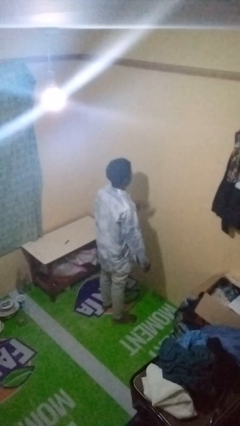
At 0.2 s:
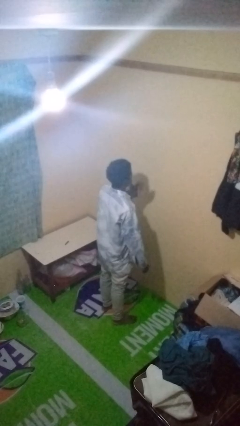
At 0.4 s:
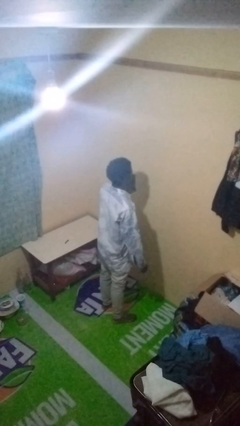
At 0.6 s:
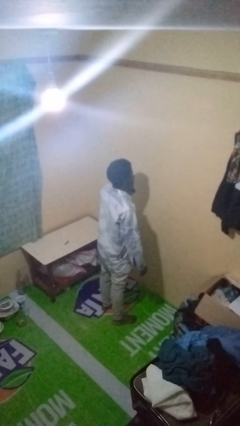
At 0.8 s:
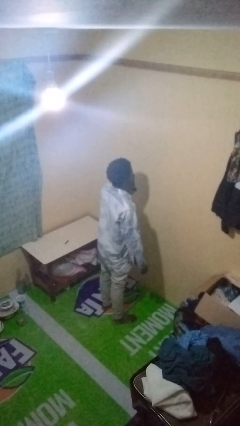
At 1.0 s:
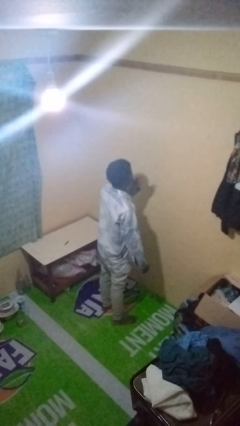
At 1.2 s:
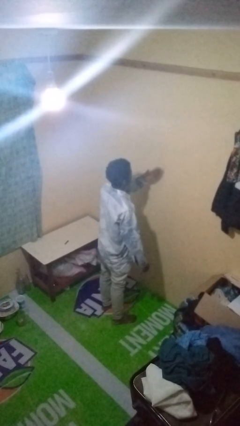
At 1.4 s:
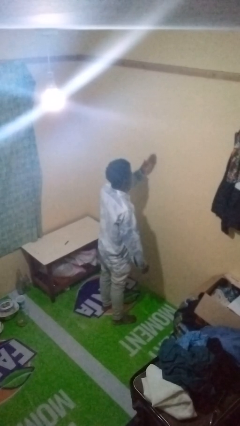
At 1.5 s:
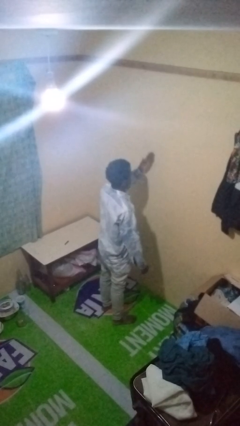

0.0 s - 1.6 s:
person gestures blow kiss

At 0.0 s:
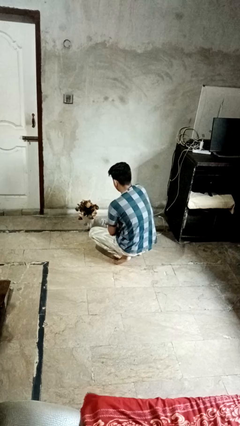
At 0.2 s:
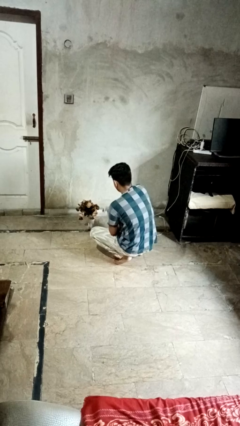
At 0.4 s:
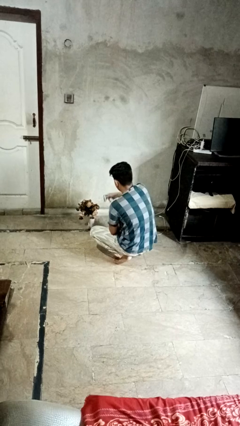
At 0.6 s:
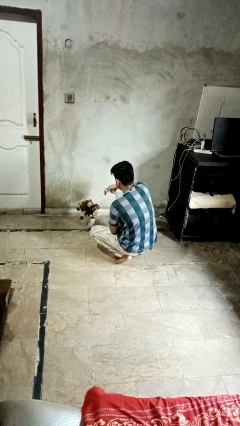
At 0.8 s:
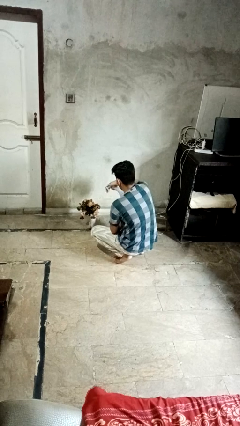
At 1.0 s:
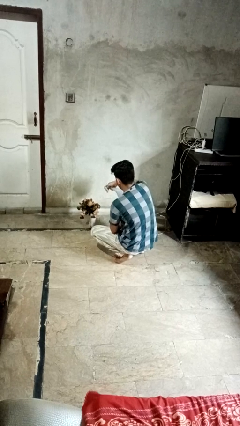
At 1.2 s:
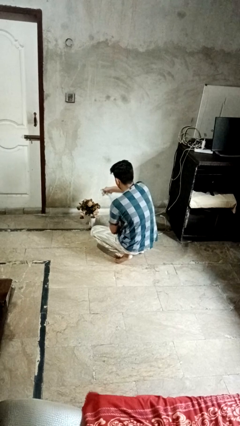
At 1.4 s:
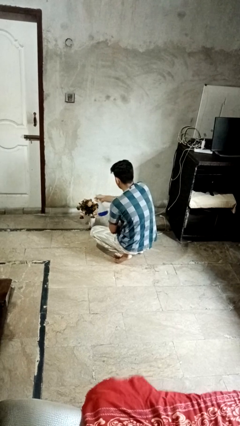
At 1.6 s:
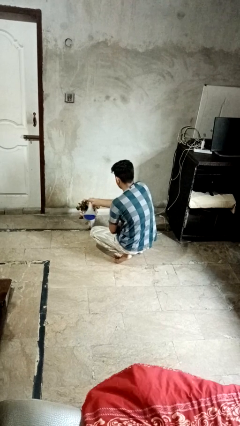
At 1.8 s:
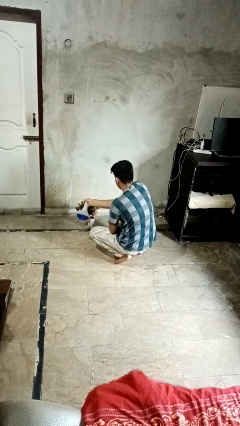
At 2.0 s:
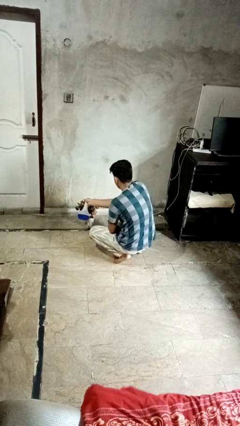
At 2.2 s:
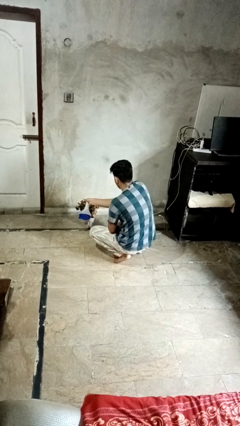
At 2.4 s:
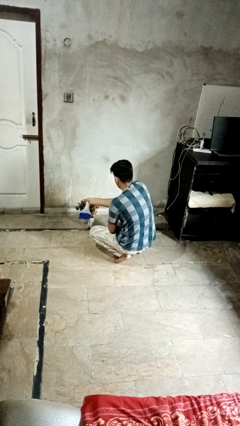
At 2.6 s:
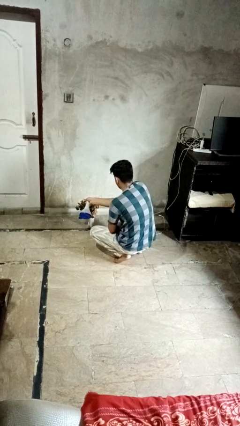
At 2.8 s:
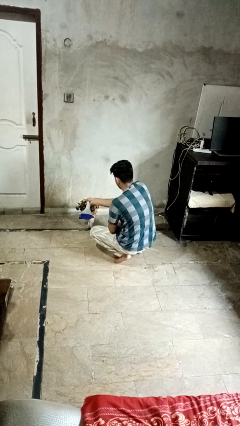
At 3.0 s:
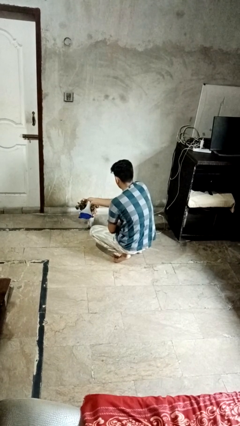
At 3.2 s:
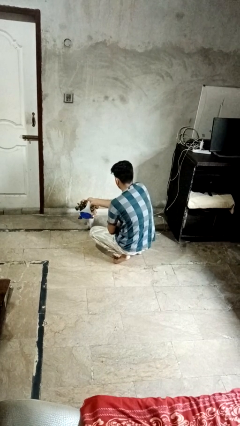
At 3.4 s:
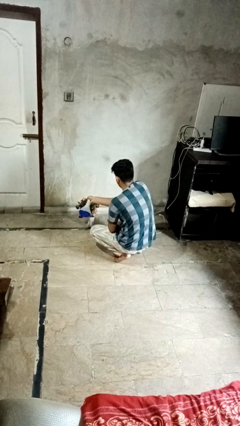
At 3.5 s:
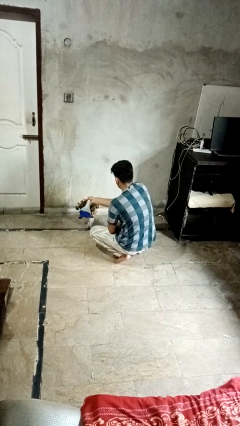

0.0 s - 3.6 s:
person waters houseplant

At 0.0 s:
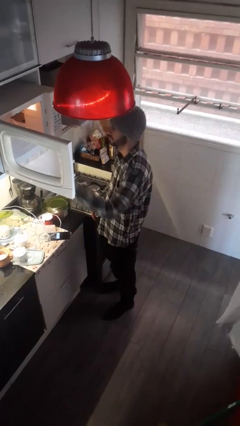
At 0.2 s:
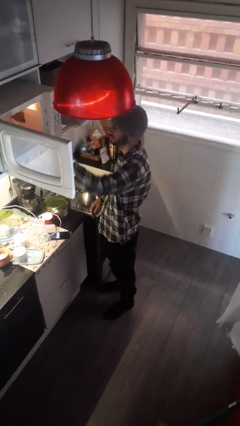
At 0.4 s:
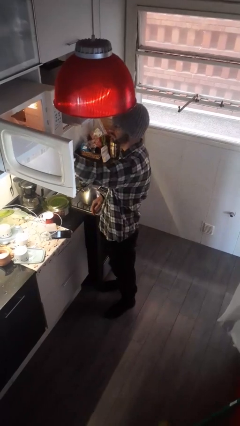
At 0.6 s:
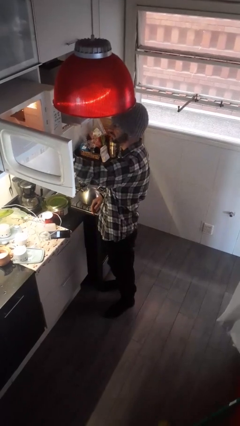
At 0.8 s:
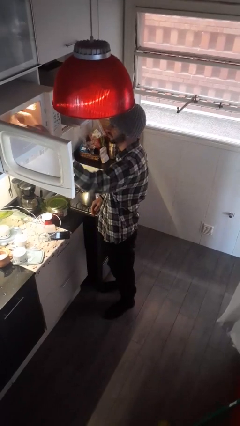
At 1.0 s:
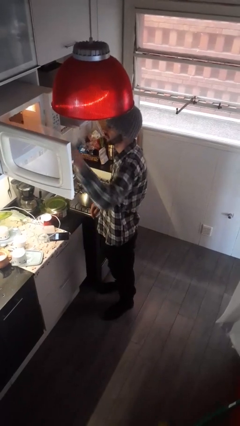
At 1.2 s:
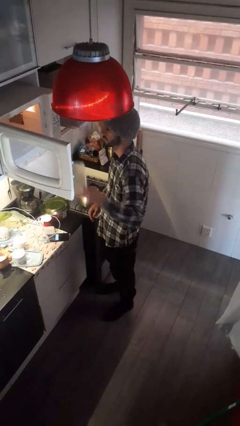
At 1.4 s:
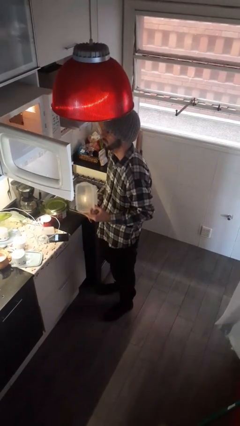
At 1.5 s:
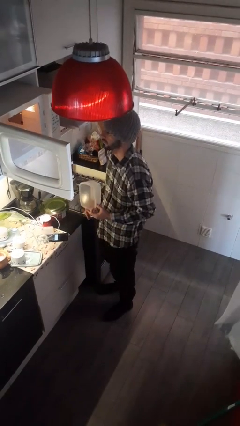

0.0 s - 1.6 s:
person takes object from microwave

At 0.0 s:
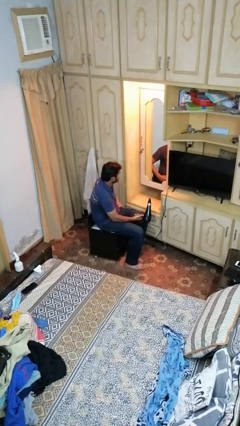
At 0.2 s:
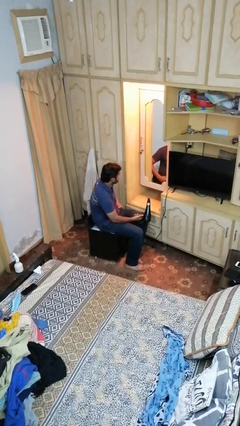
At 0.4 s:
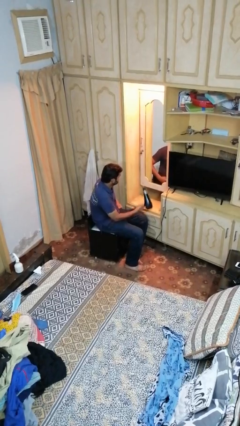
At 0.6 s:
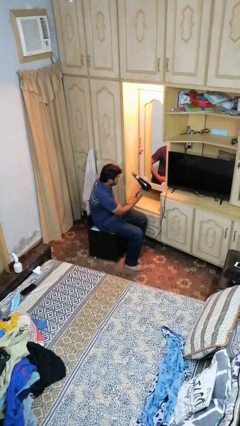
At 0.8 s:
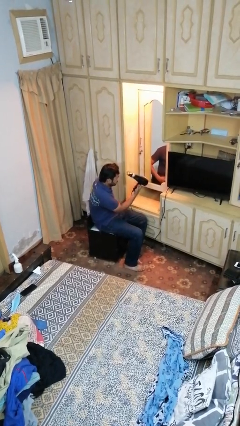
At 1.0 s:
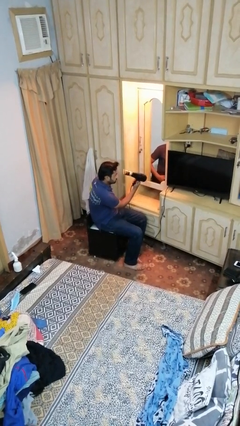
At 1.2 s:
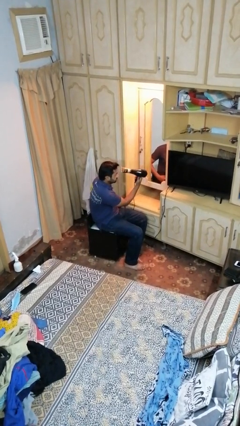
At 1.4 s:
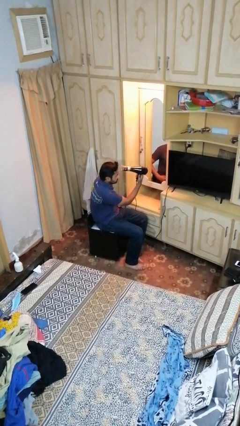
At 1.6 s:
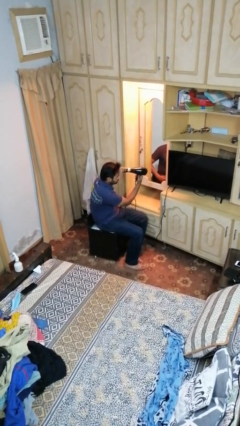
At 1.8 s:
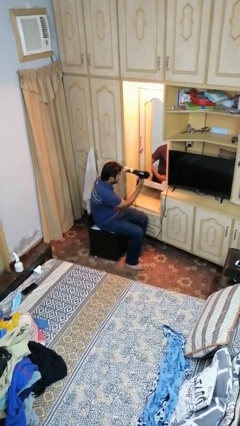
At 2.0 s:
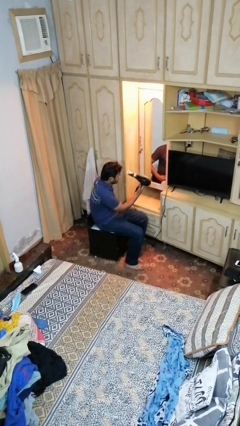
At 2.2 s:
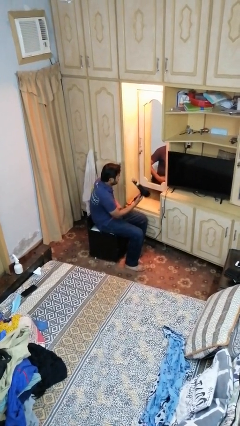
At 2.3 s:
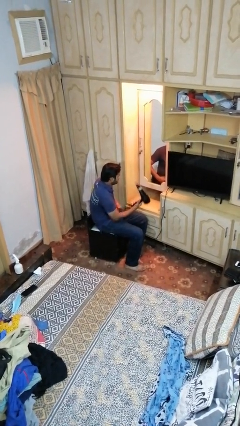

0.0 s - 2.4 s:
person dries hair with hairdryer

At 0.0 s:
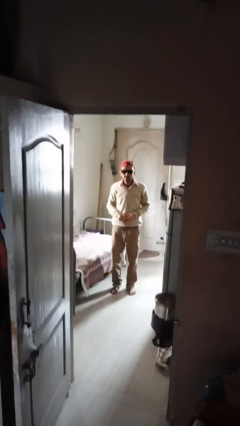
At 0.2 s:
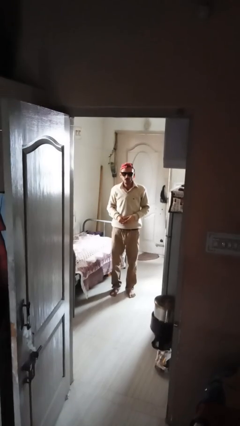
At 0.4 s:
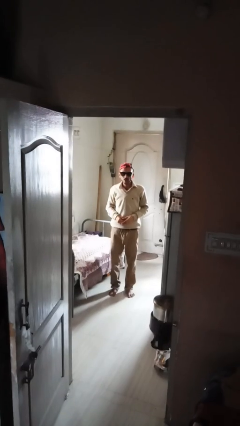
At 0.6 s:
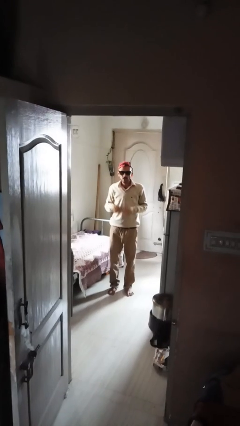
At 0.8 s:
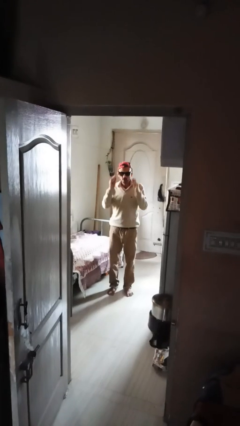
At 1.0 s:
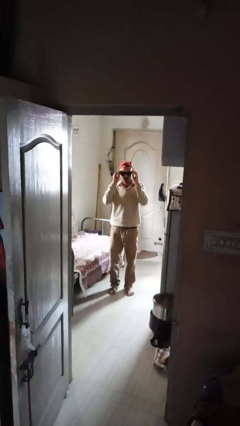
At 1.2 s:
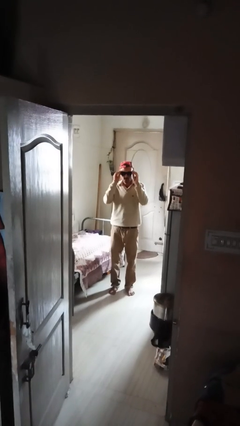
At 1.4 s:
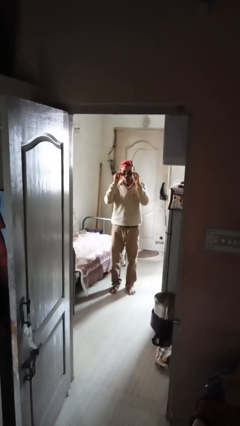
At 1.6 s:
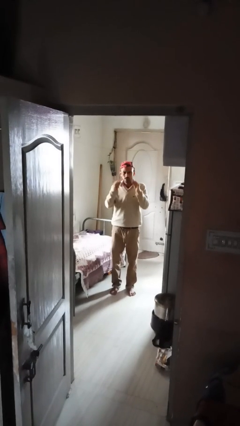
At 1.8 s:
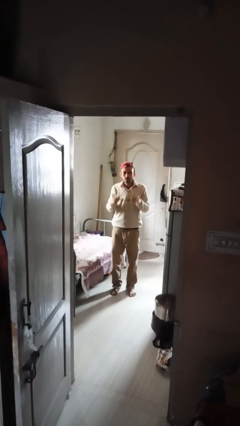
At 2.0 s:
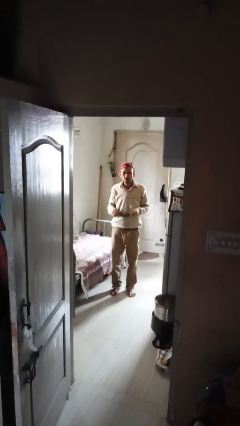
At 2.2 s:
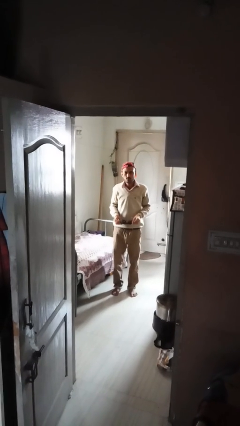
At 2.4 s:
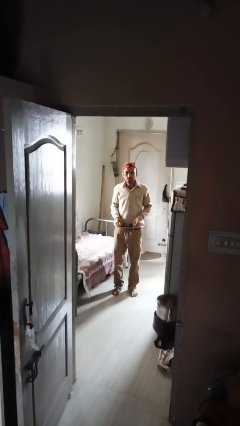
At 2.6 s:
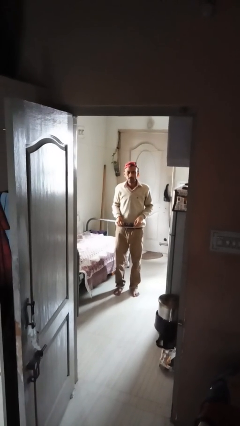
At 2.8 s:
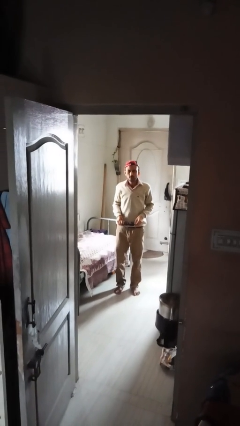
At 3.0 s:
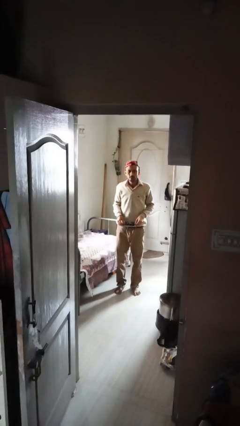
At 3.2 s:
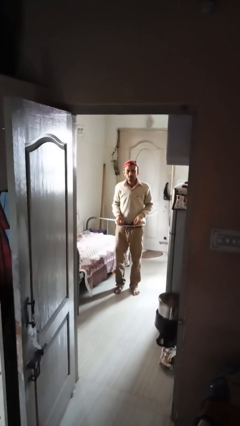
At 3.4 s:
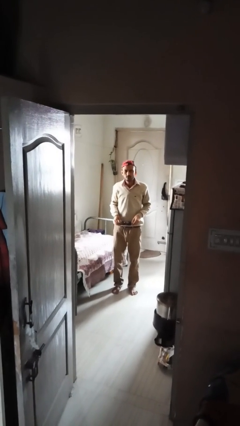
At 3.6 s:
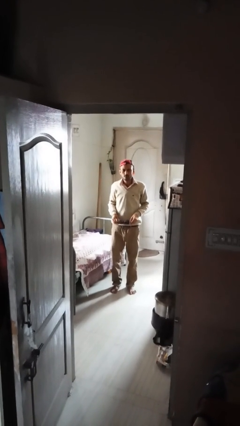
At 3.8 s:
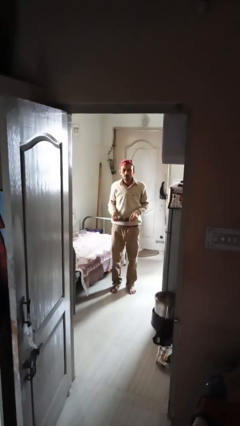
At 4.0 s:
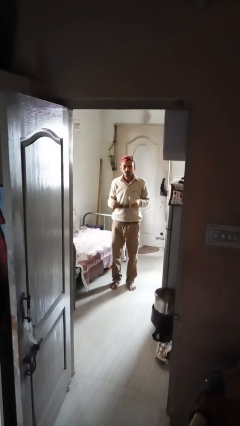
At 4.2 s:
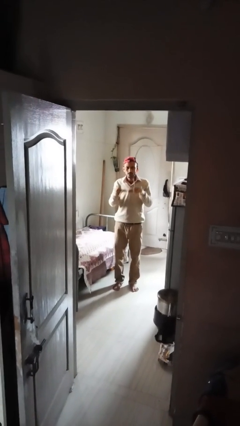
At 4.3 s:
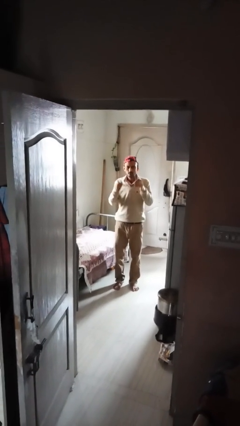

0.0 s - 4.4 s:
person takes off sunglasses

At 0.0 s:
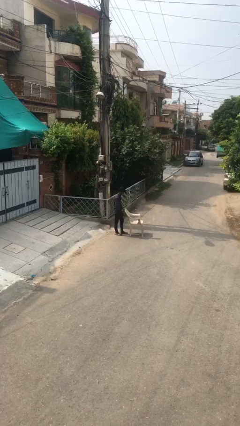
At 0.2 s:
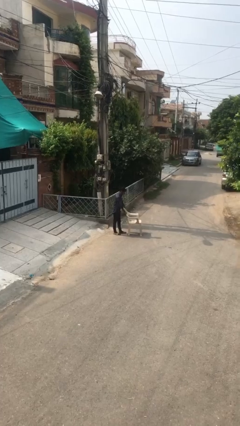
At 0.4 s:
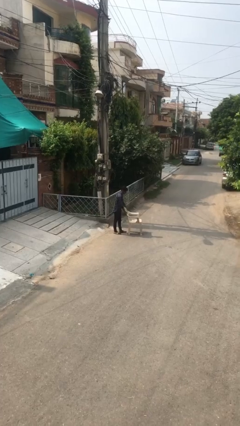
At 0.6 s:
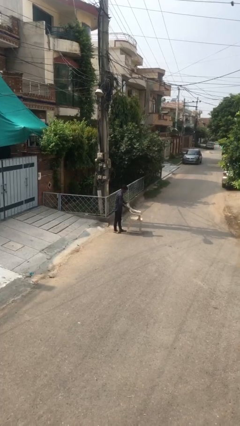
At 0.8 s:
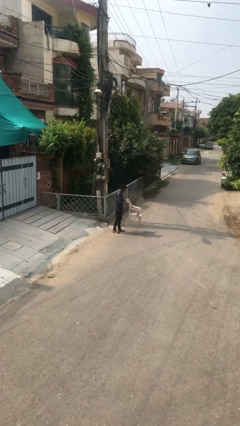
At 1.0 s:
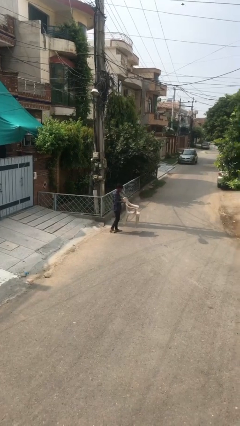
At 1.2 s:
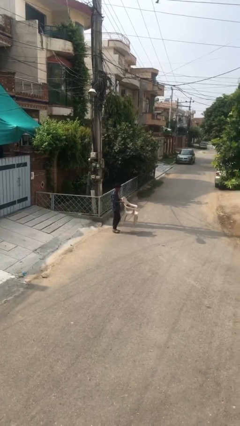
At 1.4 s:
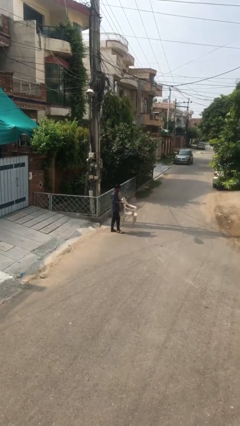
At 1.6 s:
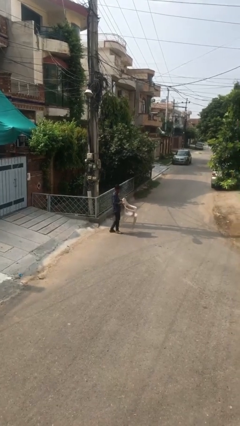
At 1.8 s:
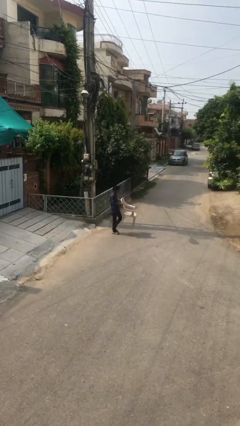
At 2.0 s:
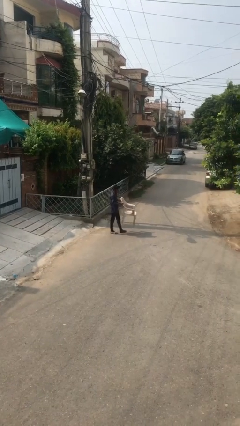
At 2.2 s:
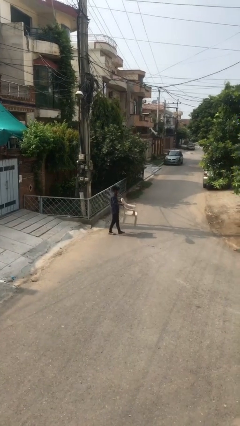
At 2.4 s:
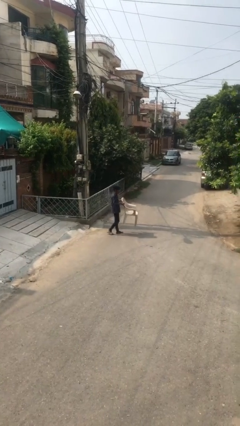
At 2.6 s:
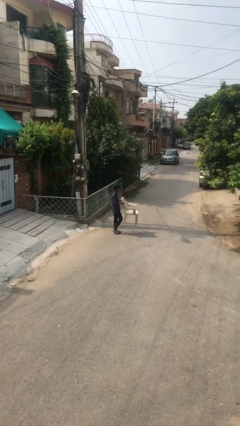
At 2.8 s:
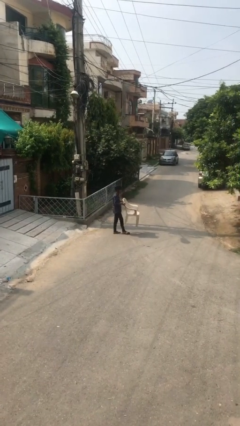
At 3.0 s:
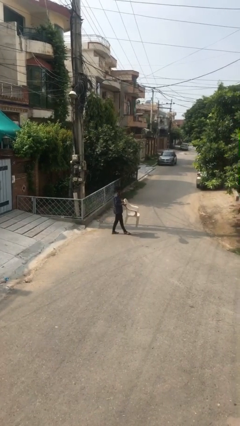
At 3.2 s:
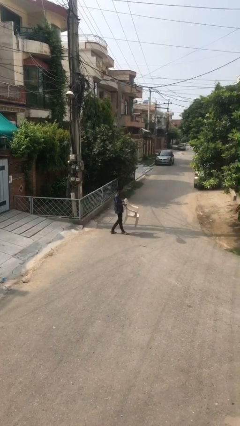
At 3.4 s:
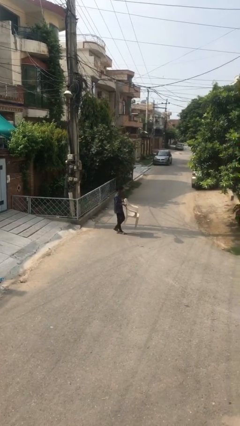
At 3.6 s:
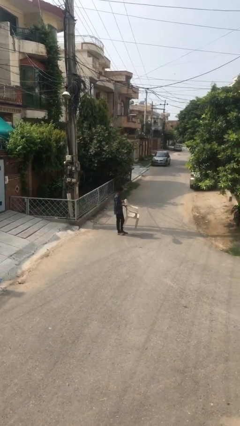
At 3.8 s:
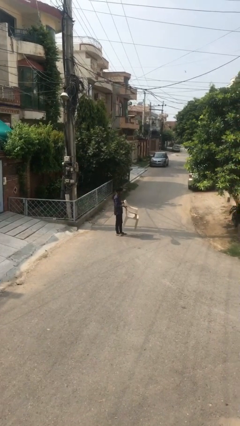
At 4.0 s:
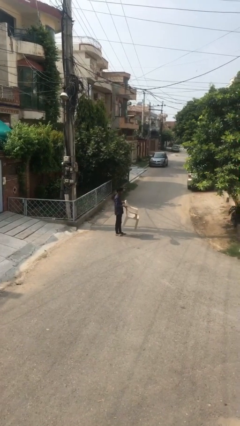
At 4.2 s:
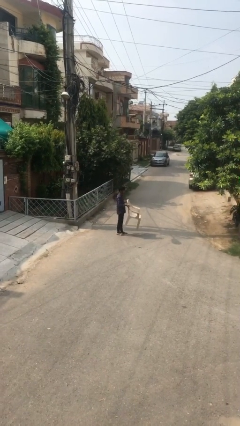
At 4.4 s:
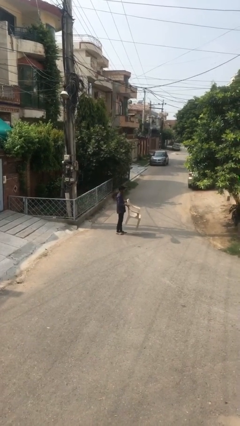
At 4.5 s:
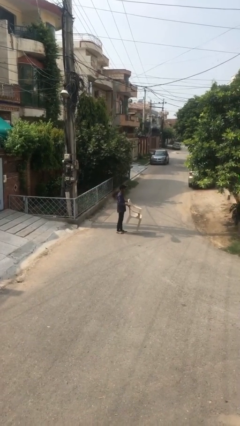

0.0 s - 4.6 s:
person carries heavy object
